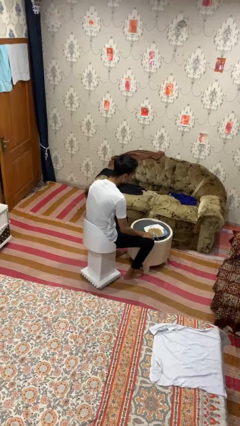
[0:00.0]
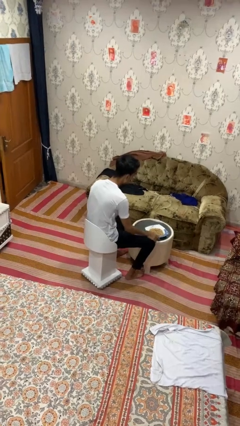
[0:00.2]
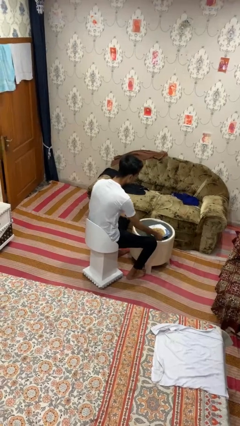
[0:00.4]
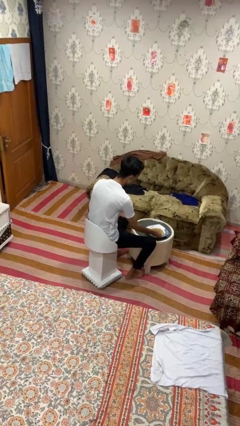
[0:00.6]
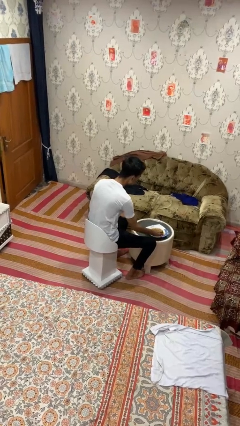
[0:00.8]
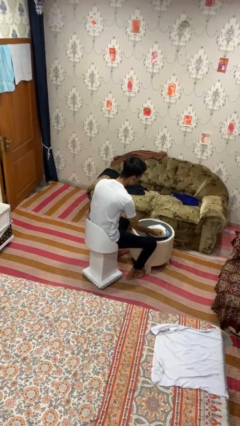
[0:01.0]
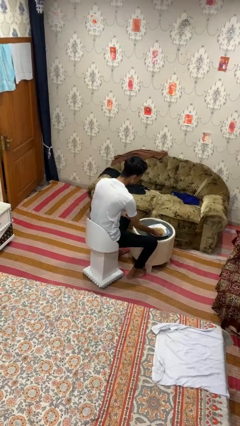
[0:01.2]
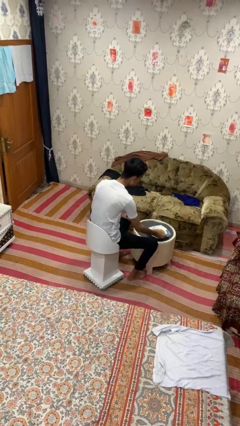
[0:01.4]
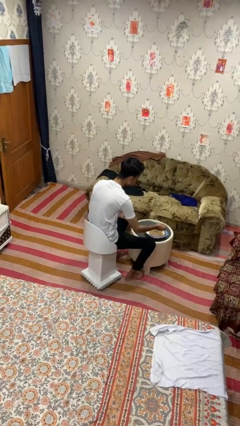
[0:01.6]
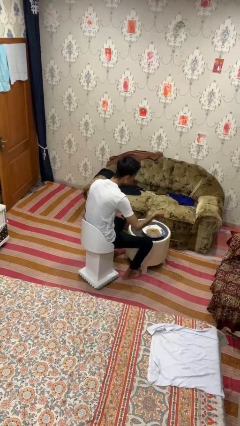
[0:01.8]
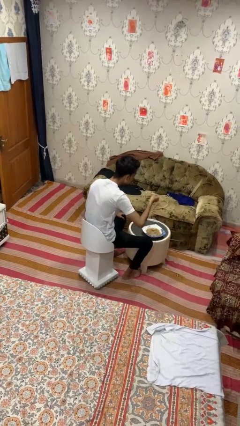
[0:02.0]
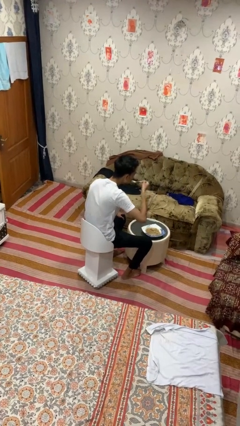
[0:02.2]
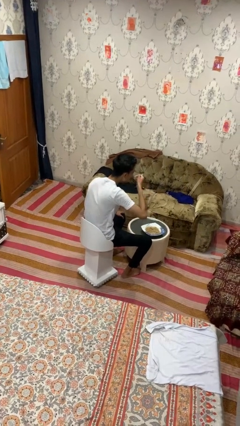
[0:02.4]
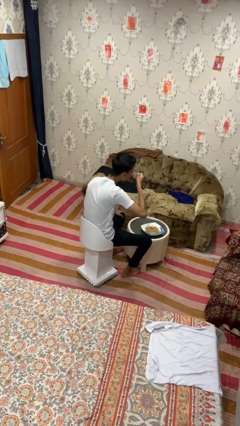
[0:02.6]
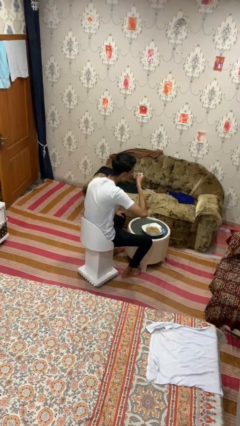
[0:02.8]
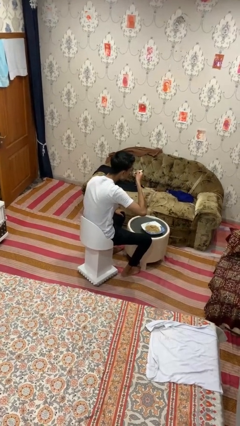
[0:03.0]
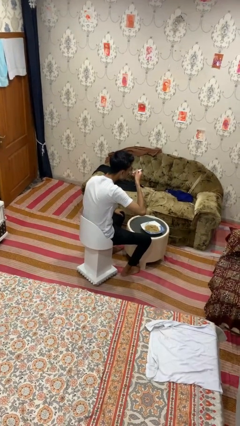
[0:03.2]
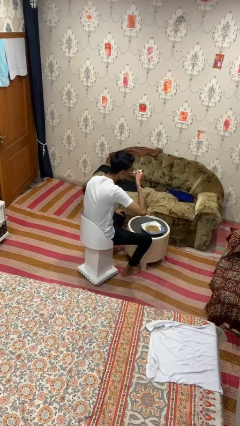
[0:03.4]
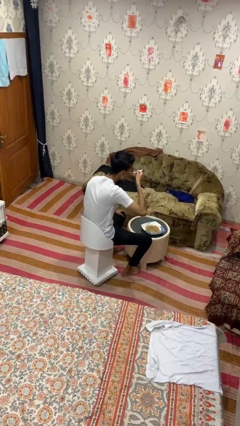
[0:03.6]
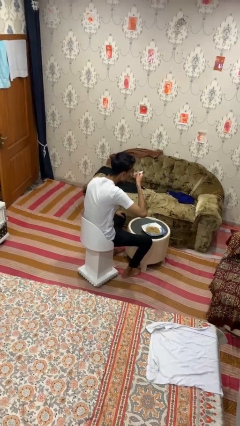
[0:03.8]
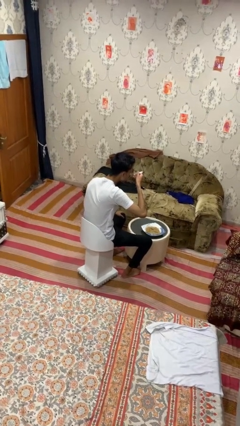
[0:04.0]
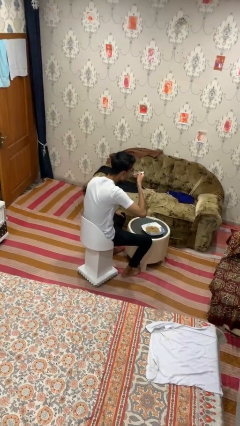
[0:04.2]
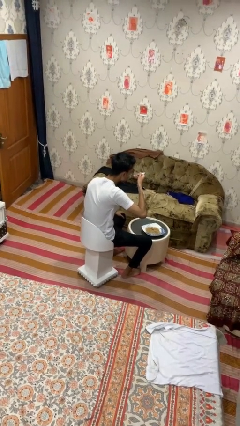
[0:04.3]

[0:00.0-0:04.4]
person eats with utensil

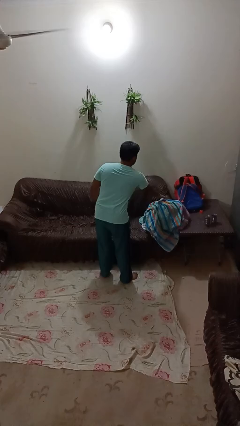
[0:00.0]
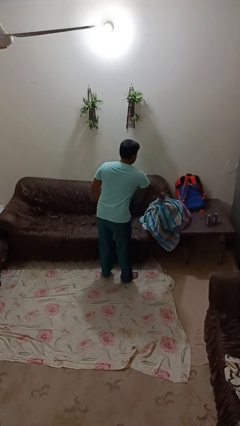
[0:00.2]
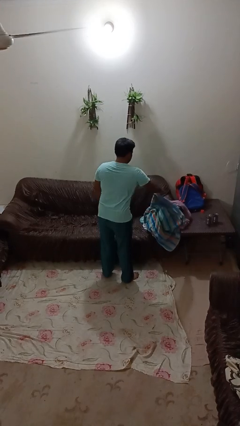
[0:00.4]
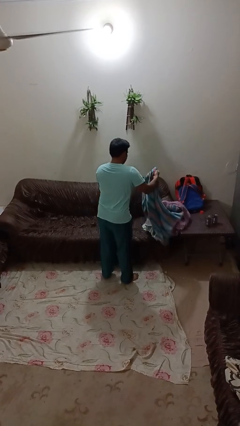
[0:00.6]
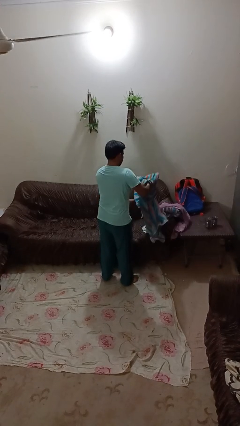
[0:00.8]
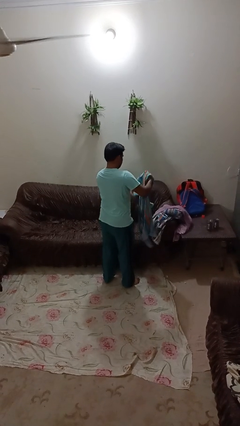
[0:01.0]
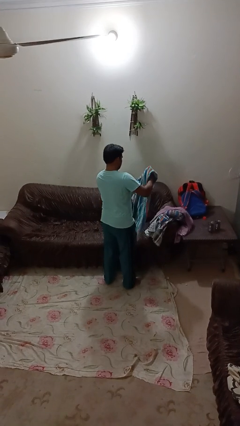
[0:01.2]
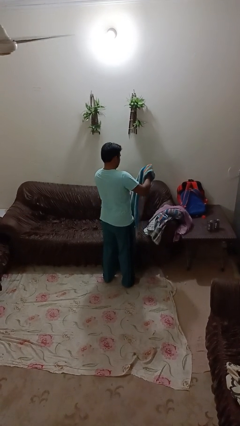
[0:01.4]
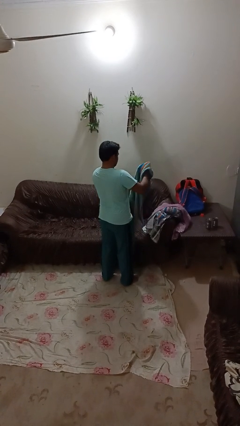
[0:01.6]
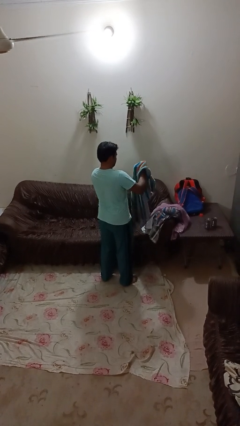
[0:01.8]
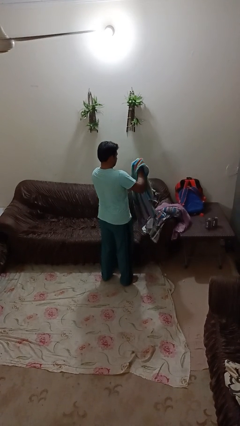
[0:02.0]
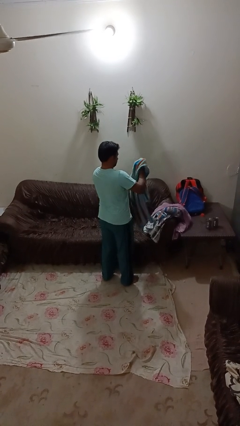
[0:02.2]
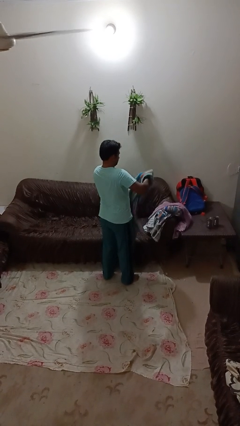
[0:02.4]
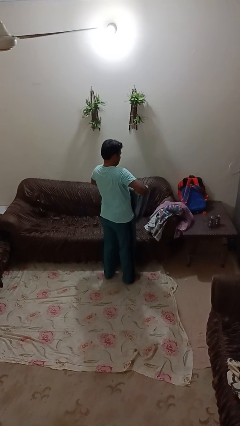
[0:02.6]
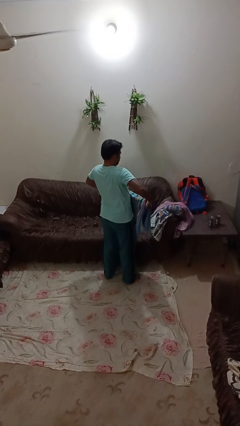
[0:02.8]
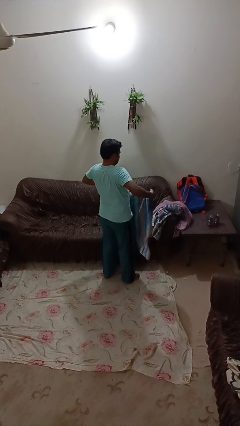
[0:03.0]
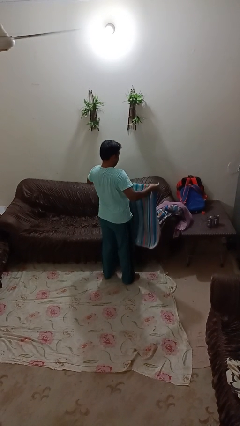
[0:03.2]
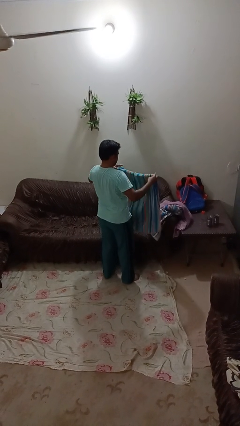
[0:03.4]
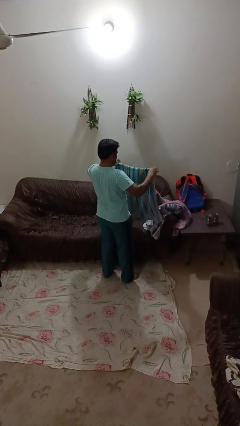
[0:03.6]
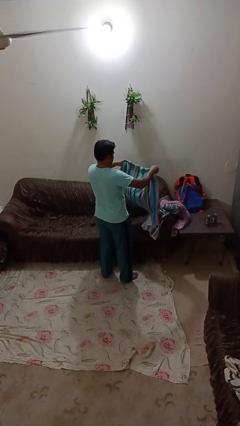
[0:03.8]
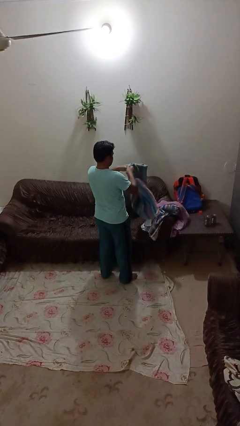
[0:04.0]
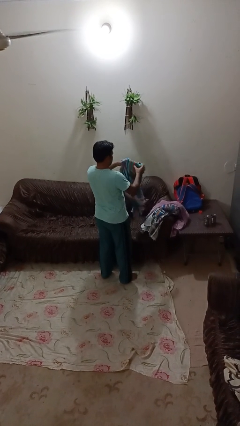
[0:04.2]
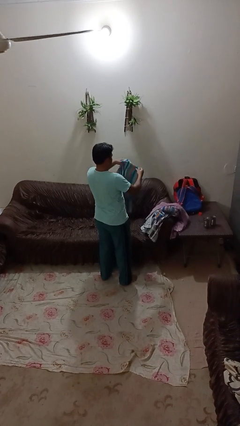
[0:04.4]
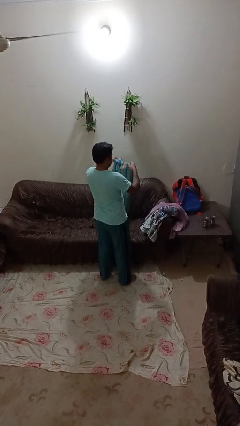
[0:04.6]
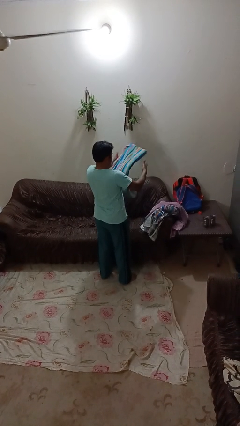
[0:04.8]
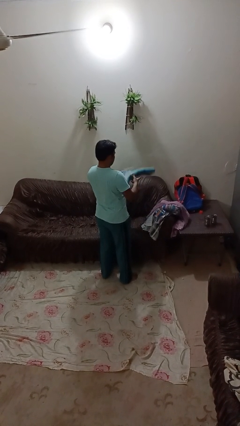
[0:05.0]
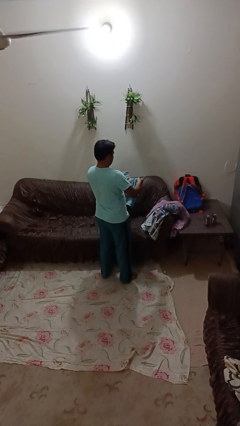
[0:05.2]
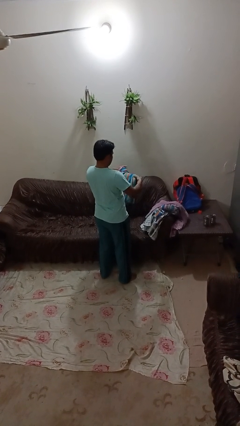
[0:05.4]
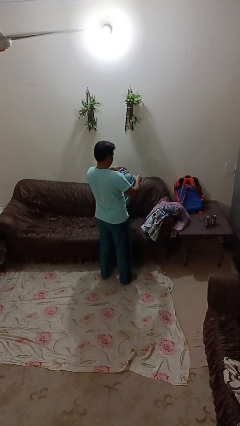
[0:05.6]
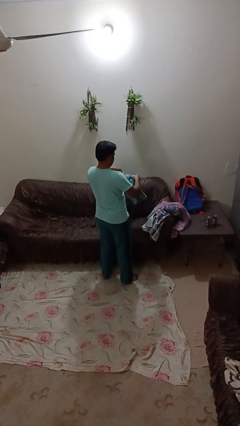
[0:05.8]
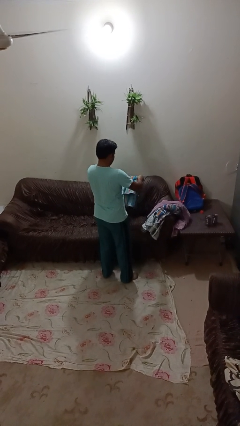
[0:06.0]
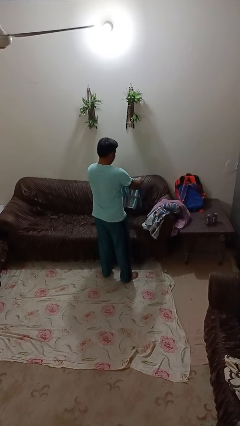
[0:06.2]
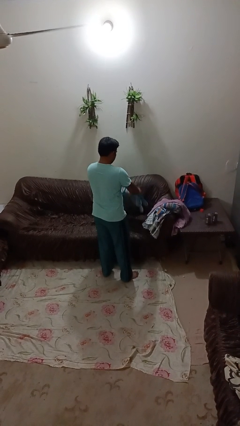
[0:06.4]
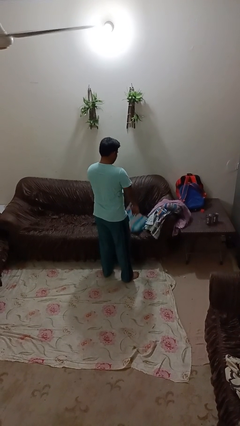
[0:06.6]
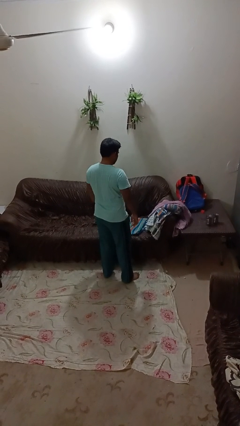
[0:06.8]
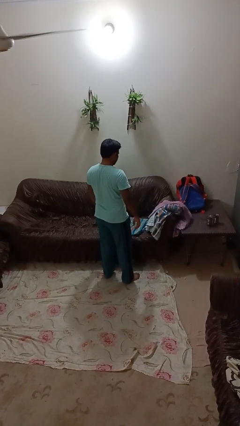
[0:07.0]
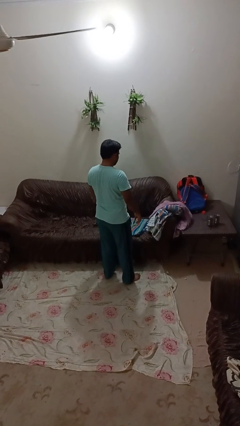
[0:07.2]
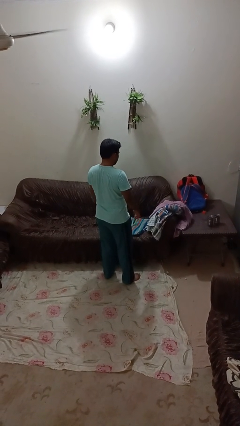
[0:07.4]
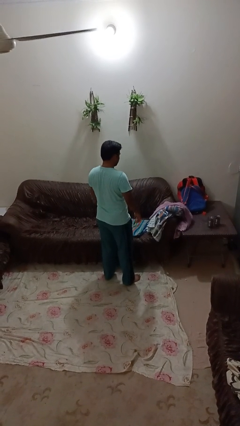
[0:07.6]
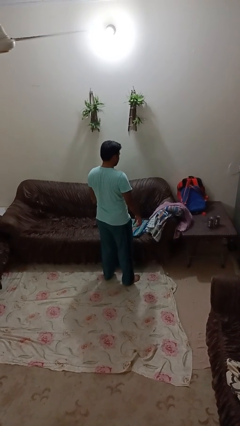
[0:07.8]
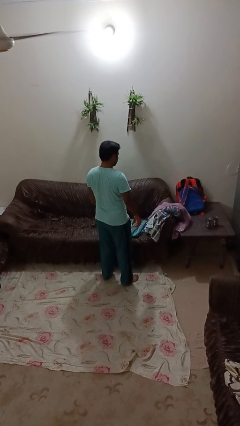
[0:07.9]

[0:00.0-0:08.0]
person folds towel

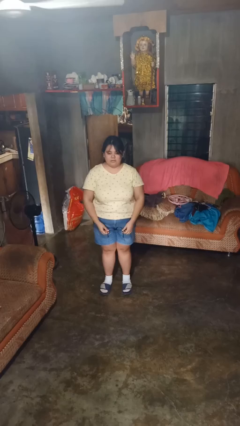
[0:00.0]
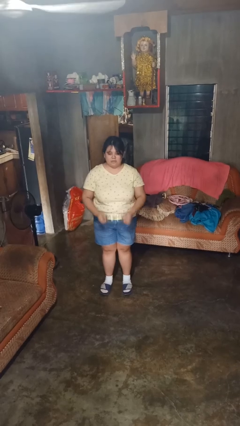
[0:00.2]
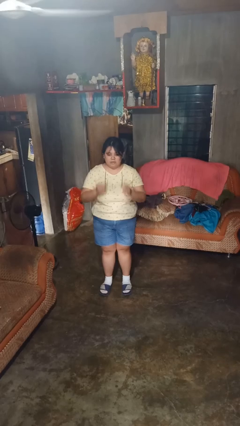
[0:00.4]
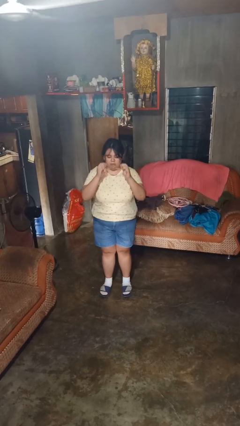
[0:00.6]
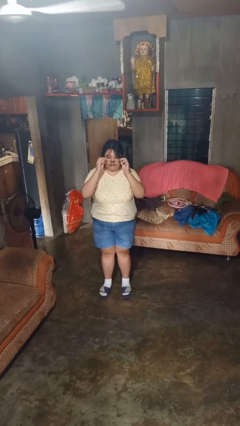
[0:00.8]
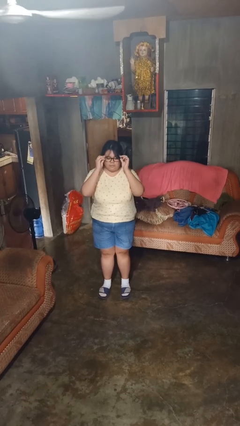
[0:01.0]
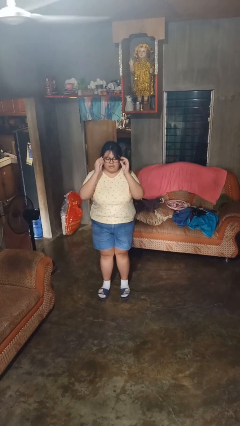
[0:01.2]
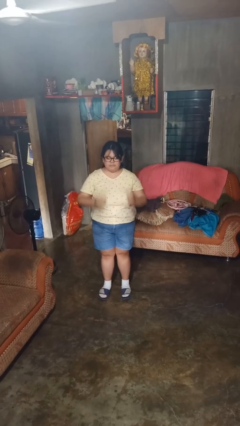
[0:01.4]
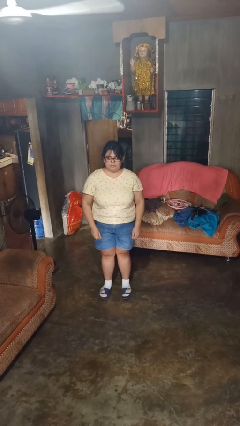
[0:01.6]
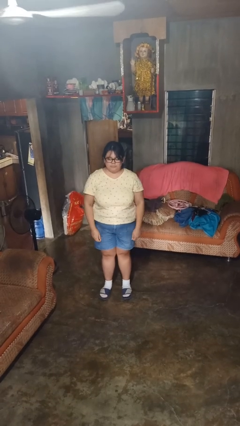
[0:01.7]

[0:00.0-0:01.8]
person puts on glasses

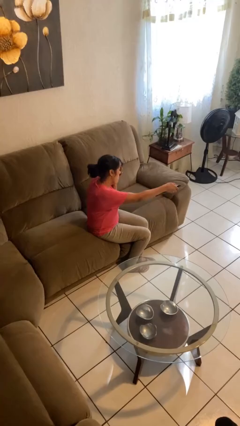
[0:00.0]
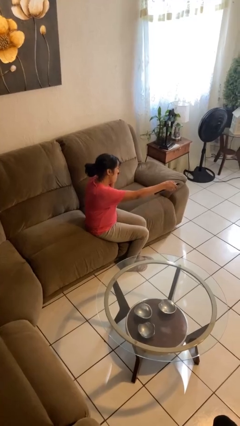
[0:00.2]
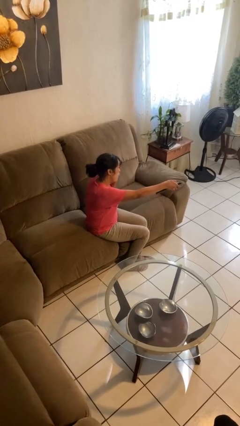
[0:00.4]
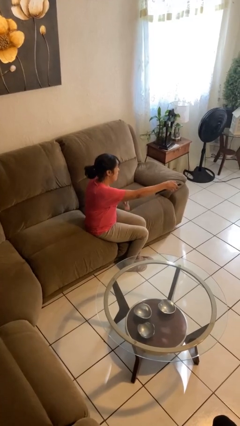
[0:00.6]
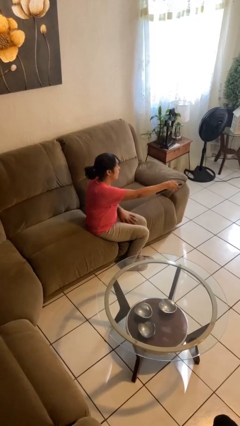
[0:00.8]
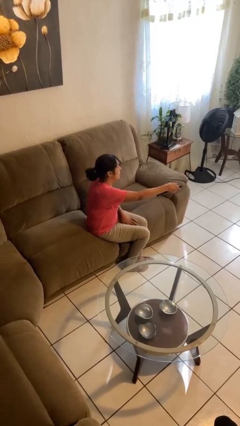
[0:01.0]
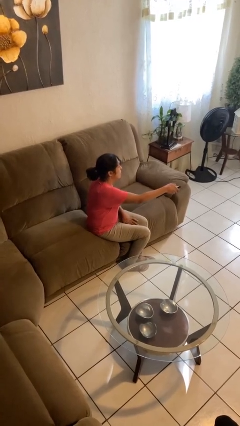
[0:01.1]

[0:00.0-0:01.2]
person uses television remote

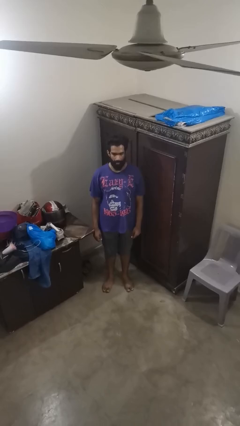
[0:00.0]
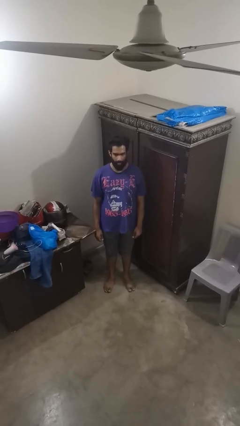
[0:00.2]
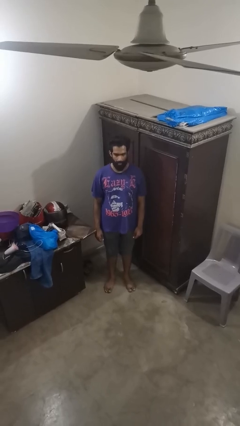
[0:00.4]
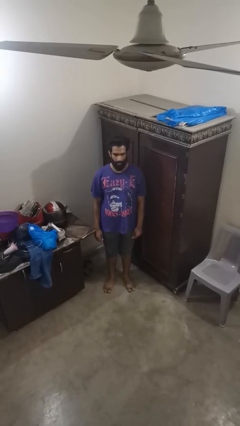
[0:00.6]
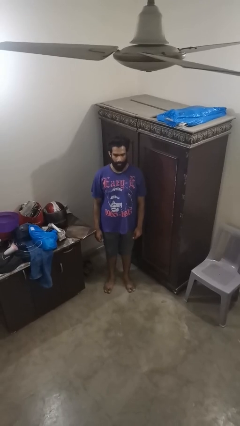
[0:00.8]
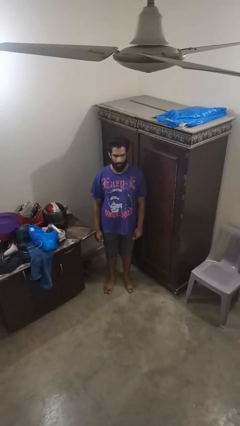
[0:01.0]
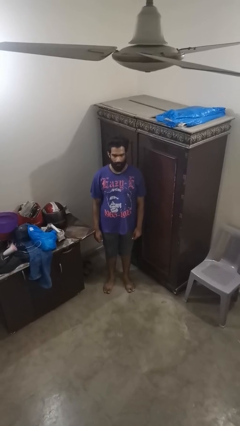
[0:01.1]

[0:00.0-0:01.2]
person sticks out tongue

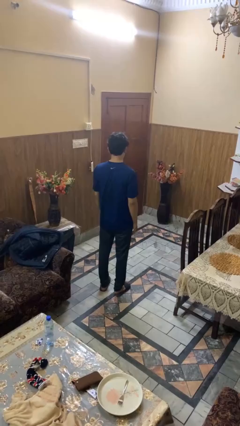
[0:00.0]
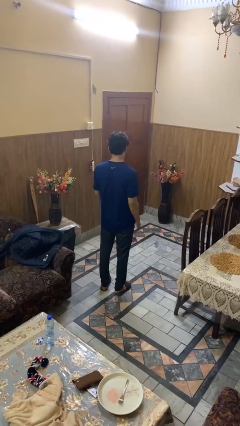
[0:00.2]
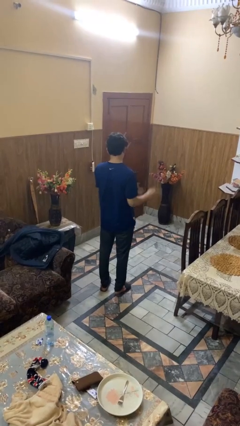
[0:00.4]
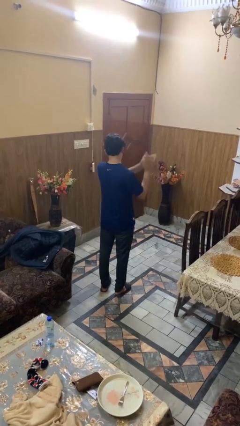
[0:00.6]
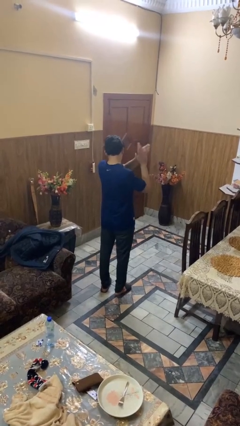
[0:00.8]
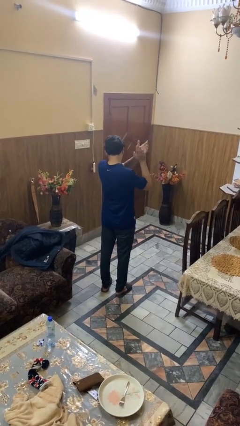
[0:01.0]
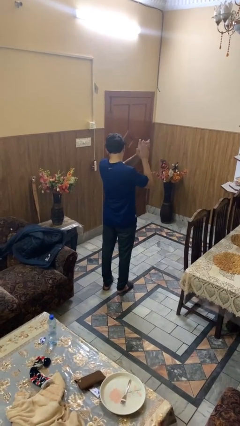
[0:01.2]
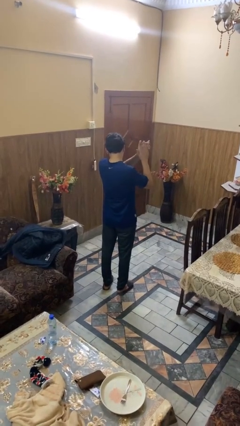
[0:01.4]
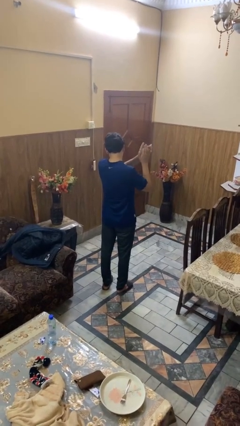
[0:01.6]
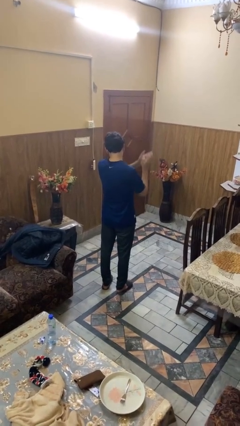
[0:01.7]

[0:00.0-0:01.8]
person claps hands
